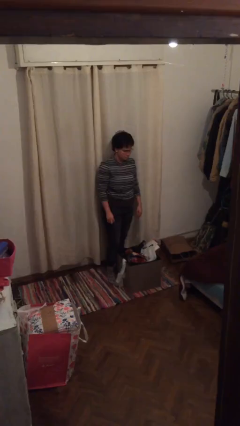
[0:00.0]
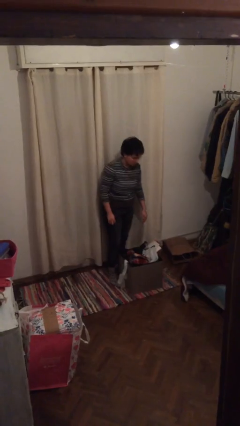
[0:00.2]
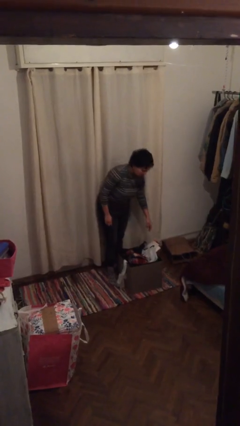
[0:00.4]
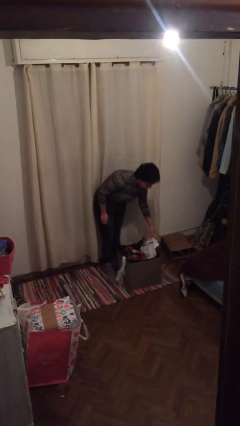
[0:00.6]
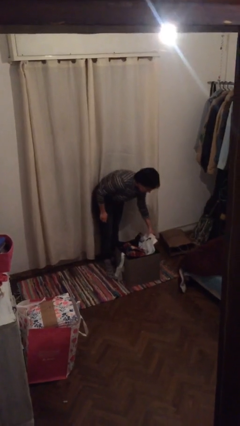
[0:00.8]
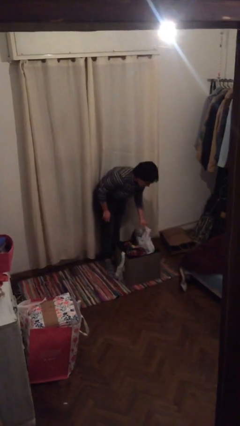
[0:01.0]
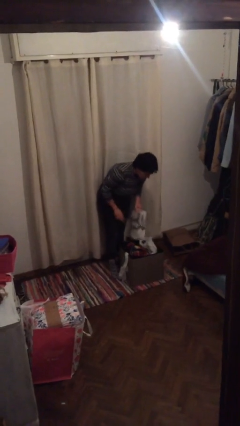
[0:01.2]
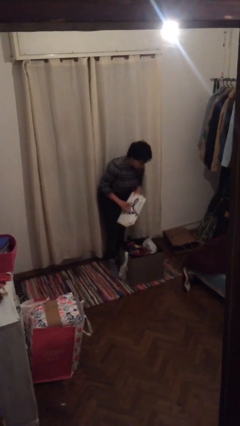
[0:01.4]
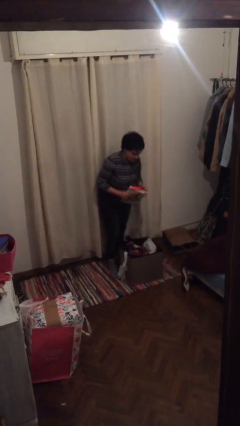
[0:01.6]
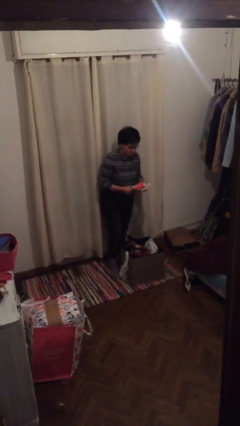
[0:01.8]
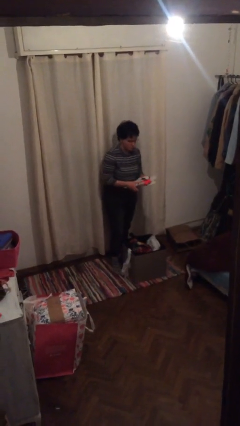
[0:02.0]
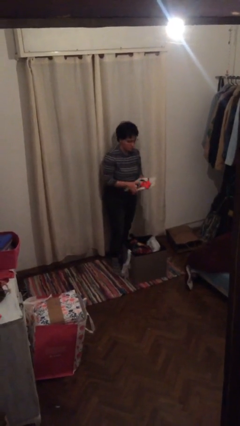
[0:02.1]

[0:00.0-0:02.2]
person takes object from basket

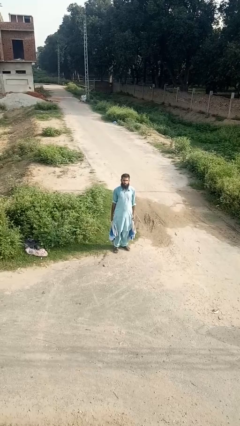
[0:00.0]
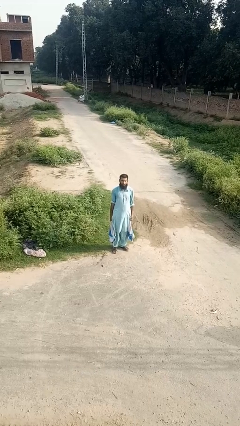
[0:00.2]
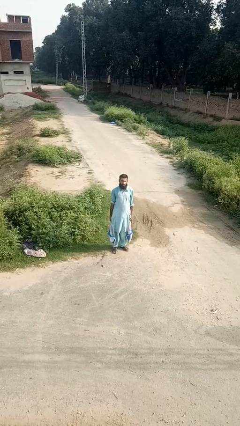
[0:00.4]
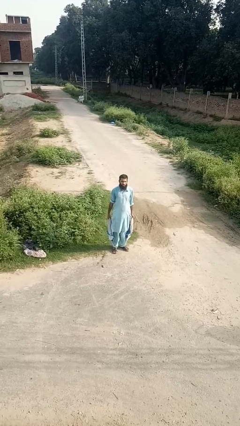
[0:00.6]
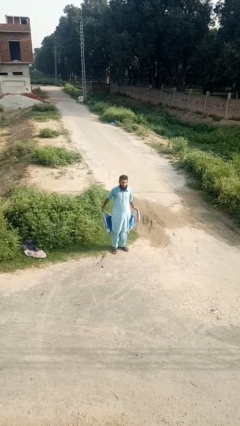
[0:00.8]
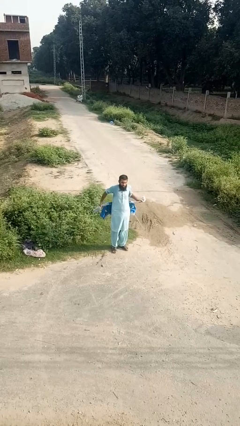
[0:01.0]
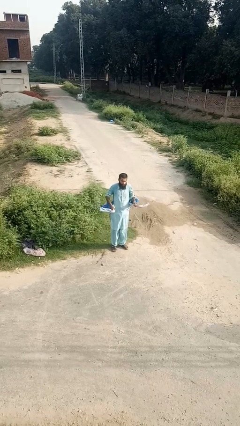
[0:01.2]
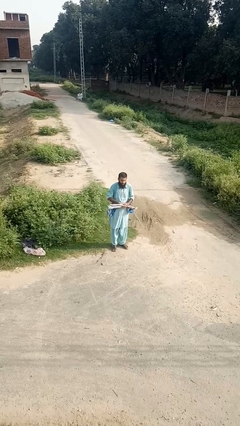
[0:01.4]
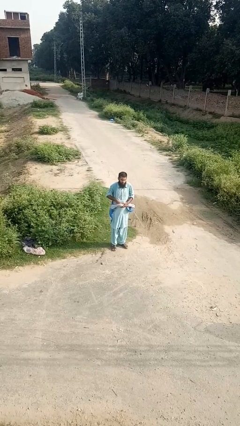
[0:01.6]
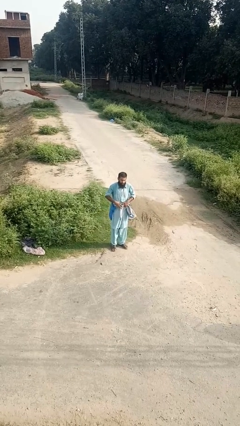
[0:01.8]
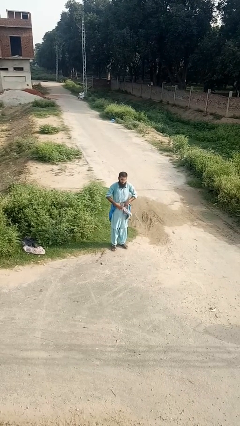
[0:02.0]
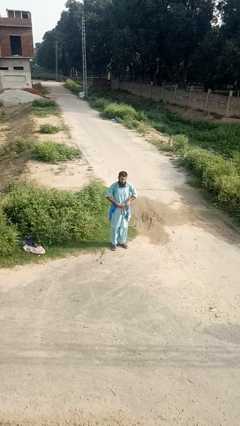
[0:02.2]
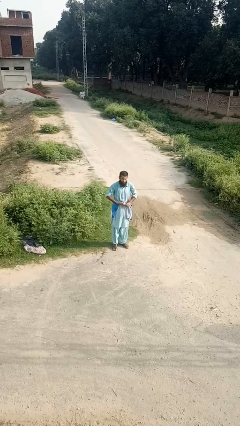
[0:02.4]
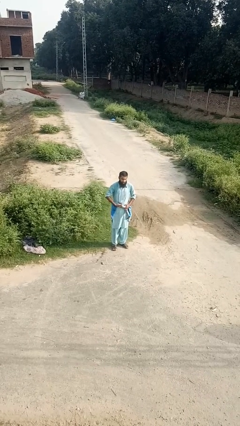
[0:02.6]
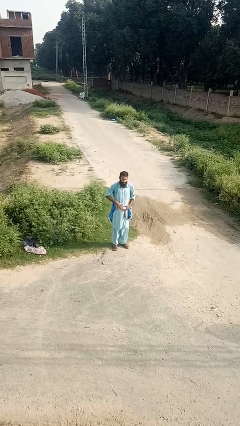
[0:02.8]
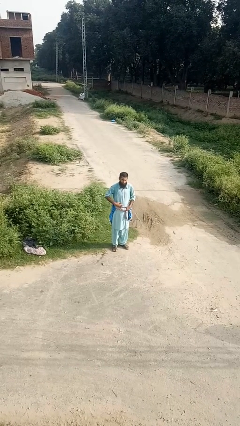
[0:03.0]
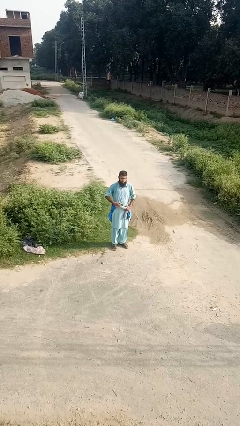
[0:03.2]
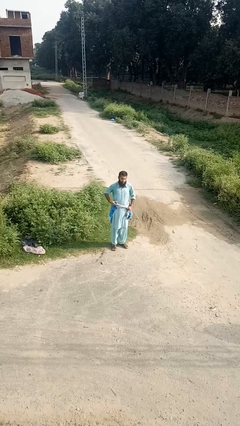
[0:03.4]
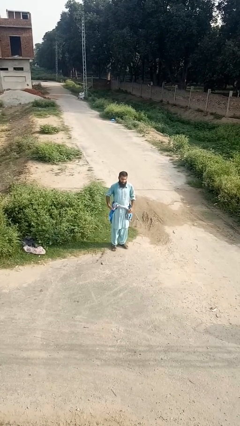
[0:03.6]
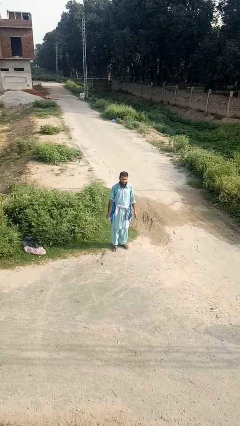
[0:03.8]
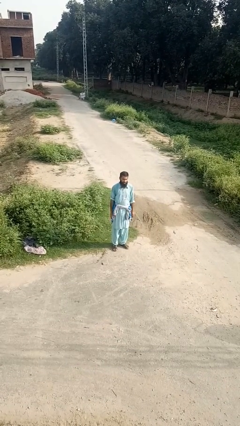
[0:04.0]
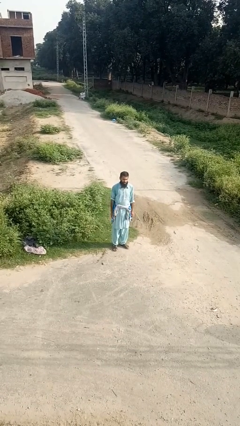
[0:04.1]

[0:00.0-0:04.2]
person ties jacket around waist

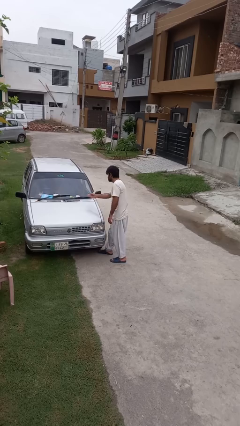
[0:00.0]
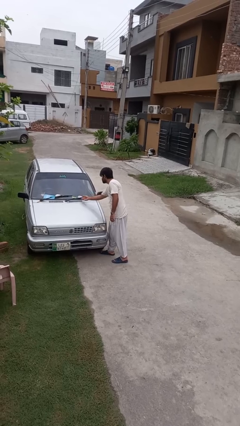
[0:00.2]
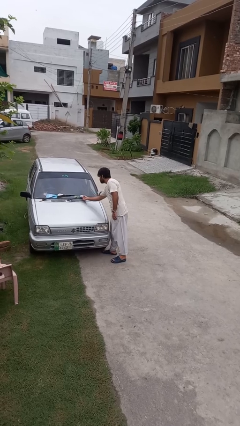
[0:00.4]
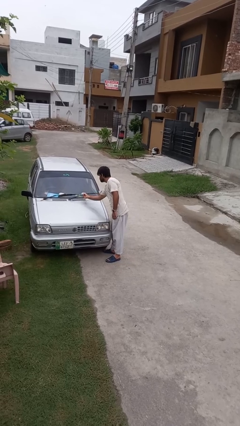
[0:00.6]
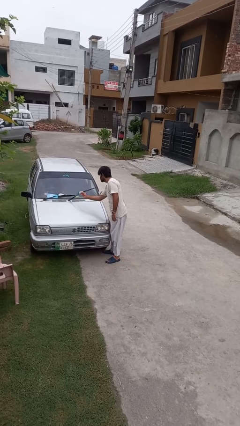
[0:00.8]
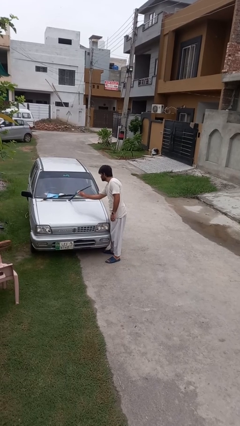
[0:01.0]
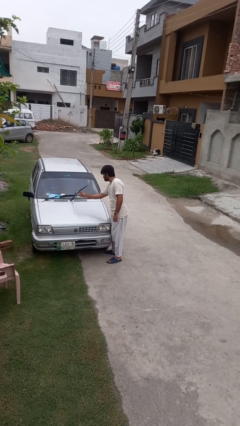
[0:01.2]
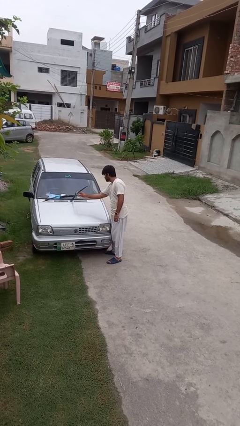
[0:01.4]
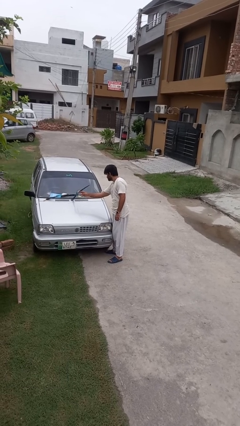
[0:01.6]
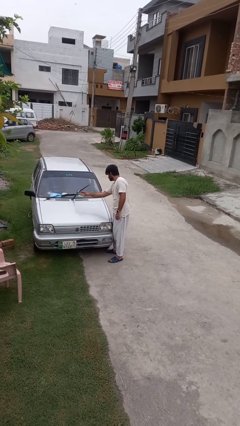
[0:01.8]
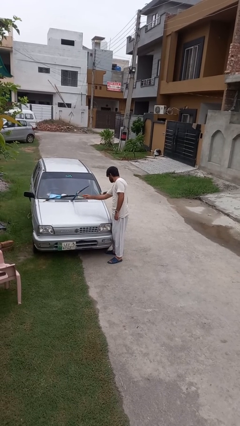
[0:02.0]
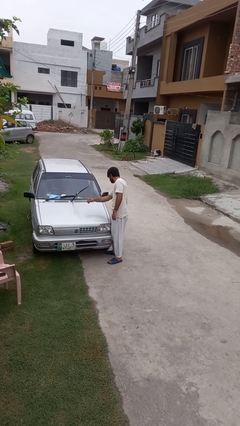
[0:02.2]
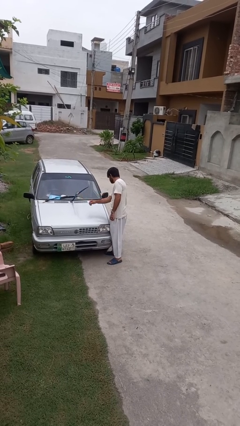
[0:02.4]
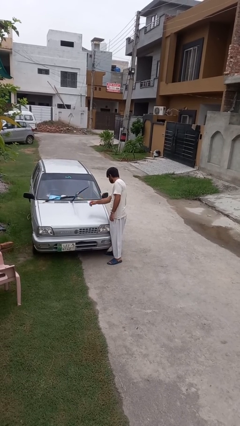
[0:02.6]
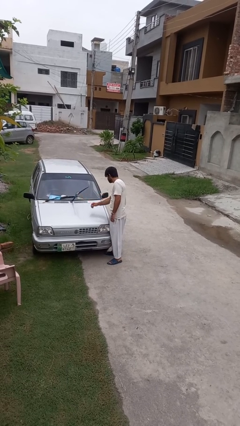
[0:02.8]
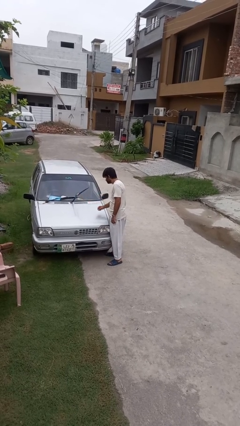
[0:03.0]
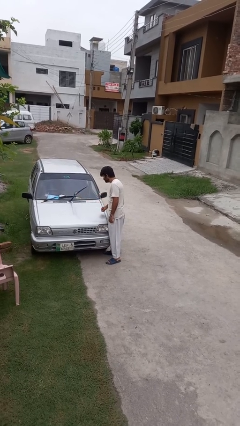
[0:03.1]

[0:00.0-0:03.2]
person flips up car wipers

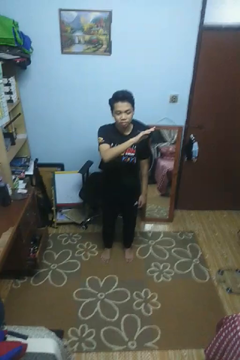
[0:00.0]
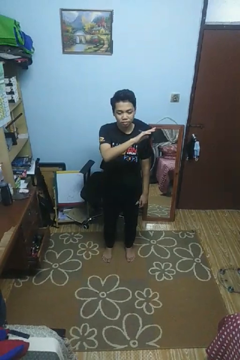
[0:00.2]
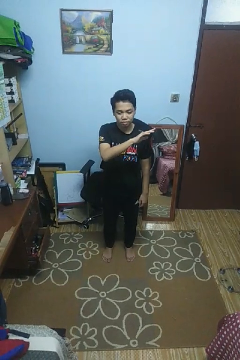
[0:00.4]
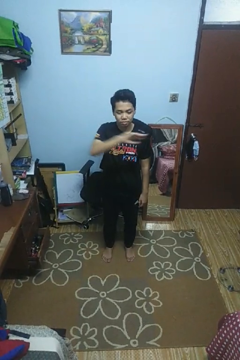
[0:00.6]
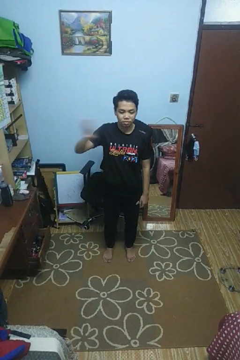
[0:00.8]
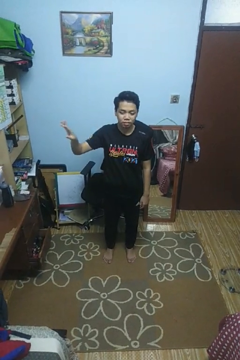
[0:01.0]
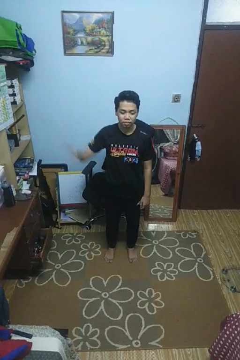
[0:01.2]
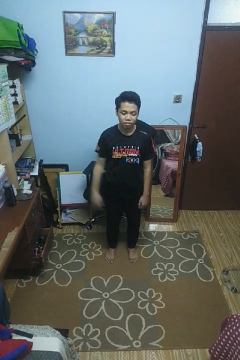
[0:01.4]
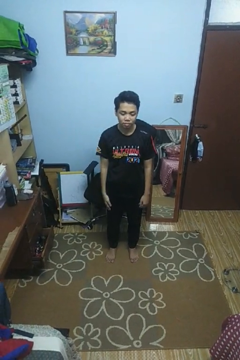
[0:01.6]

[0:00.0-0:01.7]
person gestures swipe right

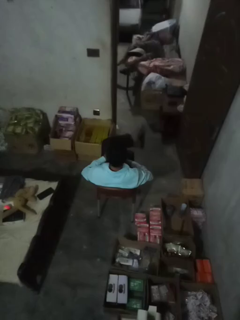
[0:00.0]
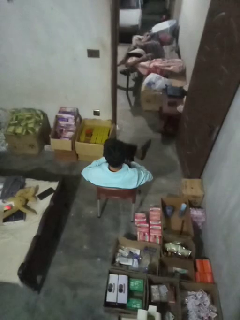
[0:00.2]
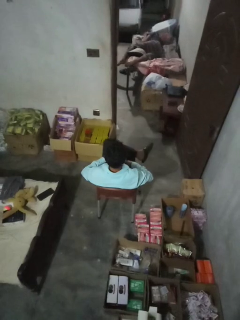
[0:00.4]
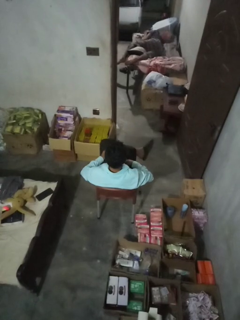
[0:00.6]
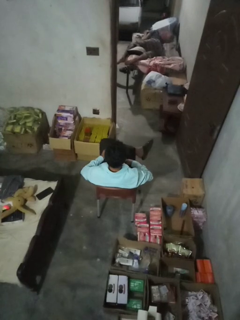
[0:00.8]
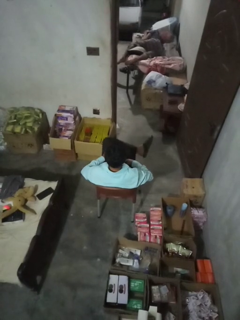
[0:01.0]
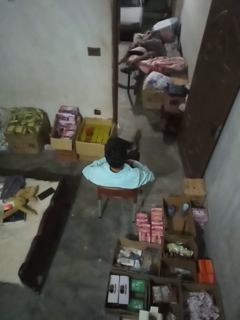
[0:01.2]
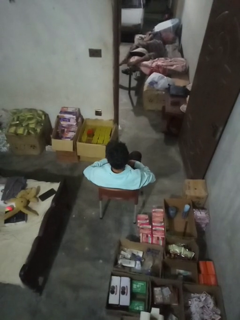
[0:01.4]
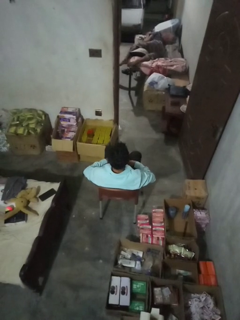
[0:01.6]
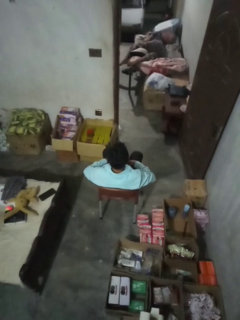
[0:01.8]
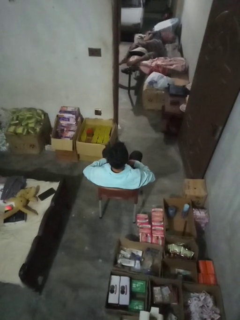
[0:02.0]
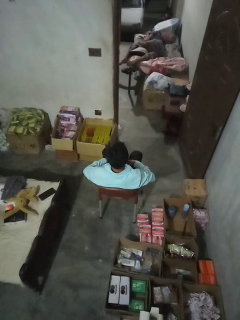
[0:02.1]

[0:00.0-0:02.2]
person crosses legs

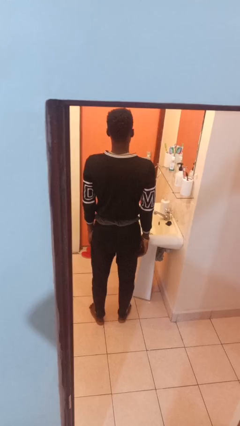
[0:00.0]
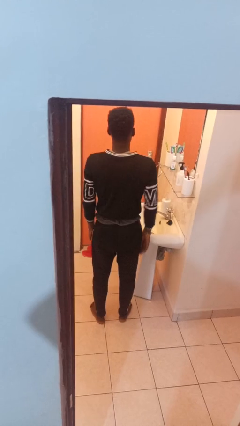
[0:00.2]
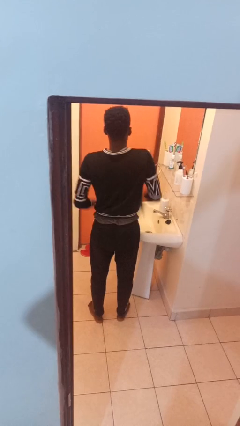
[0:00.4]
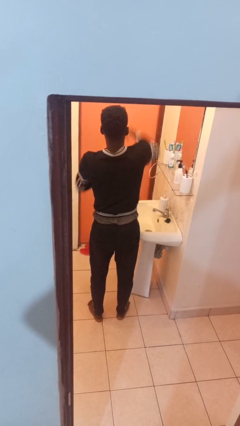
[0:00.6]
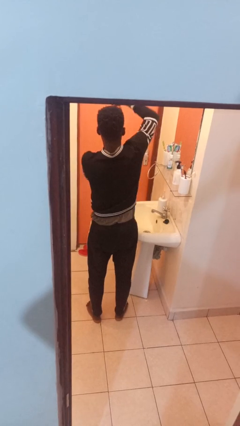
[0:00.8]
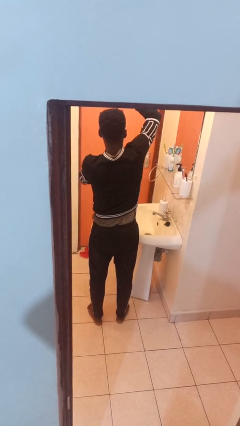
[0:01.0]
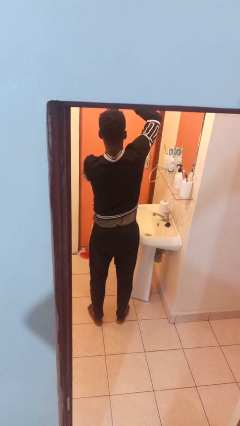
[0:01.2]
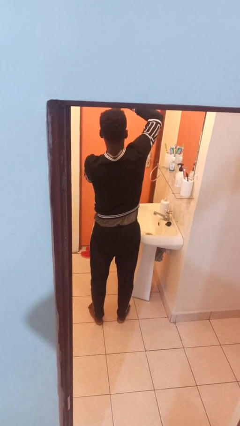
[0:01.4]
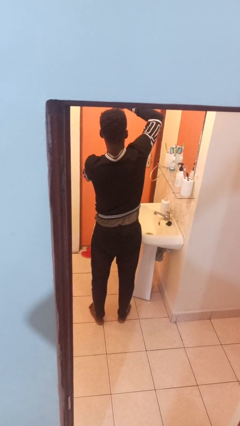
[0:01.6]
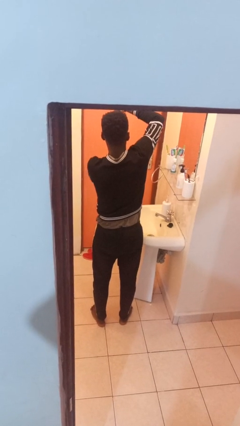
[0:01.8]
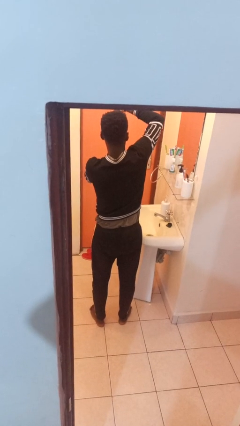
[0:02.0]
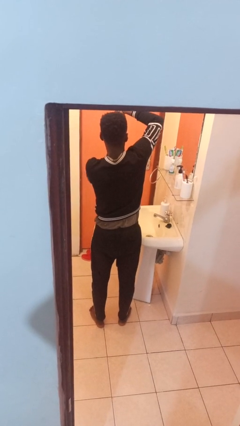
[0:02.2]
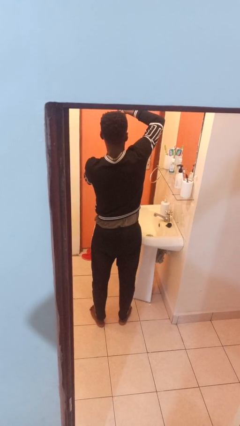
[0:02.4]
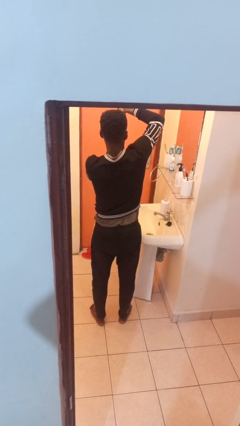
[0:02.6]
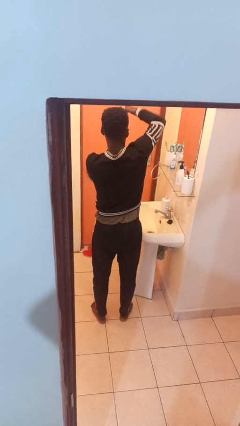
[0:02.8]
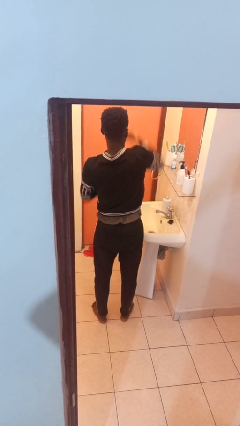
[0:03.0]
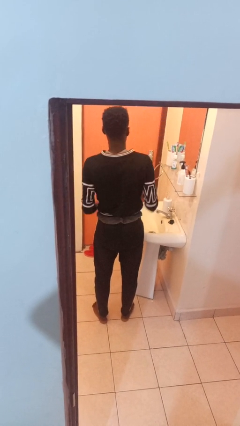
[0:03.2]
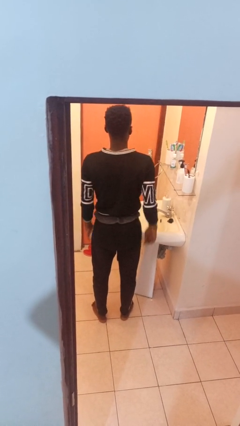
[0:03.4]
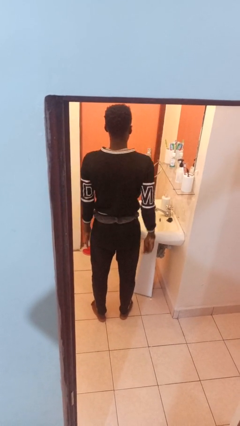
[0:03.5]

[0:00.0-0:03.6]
person applies deodorant

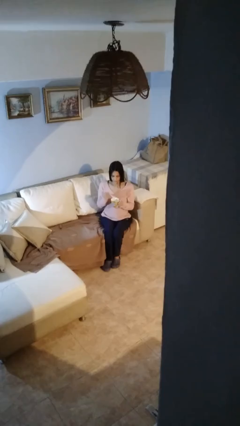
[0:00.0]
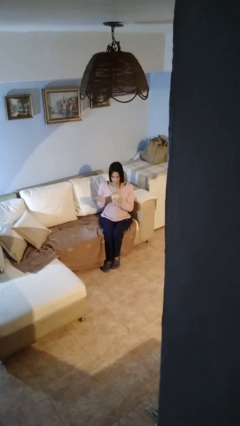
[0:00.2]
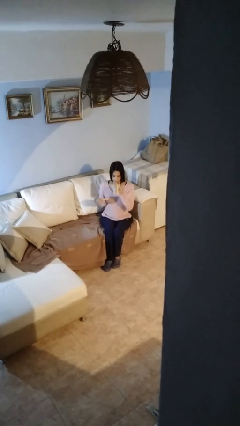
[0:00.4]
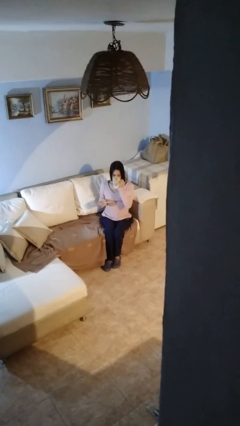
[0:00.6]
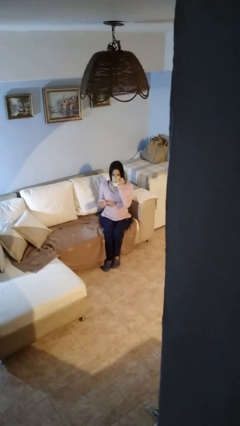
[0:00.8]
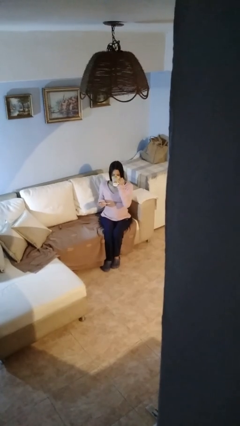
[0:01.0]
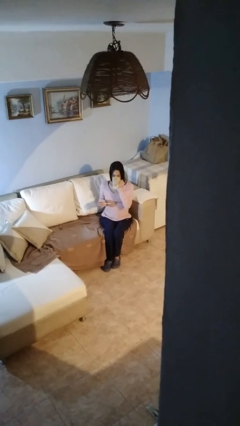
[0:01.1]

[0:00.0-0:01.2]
person drinks from mug
